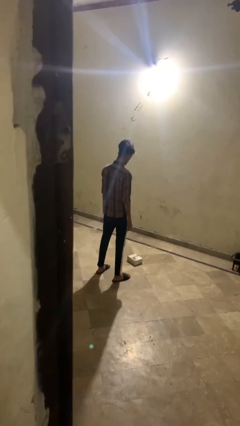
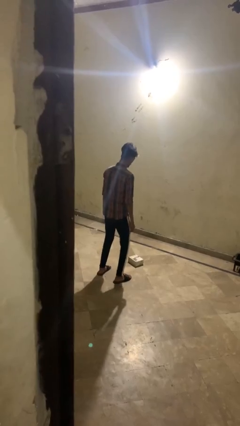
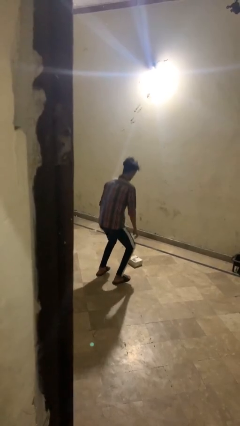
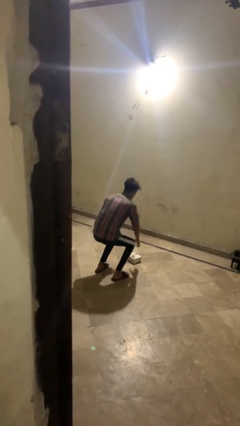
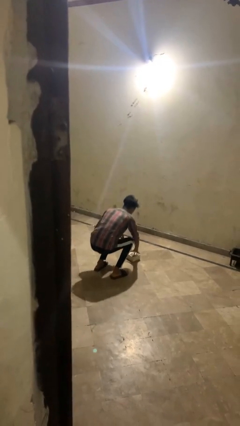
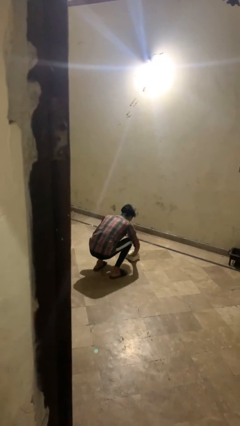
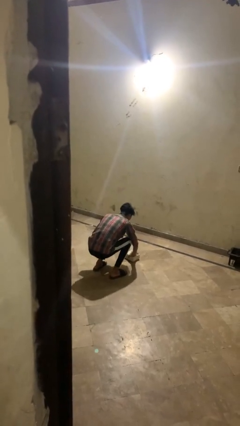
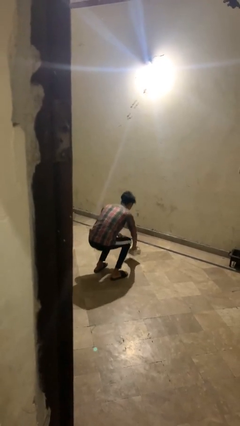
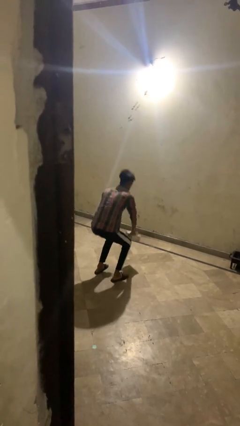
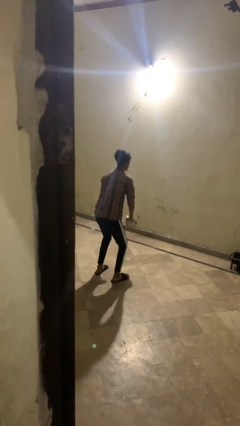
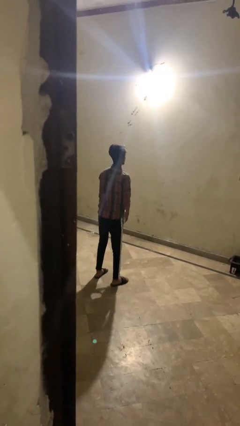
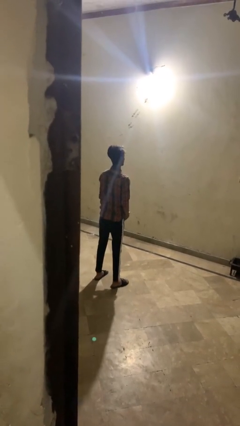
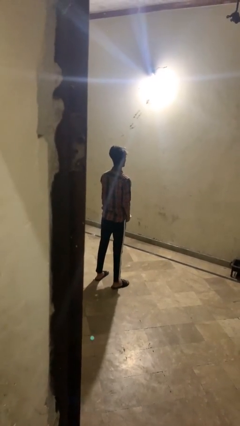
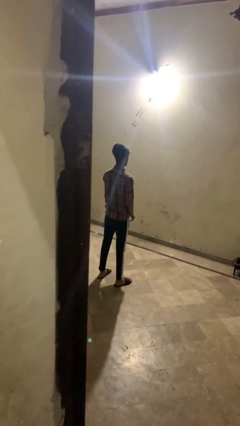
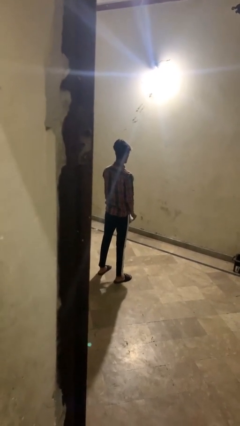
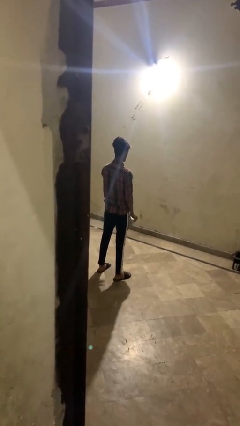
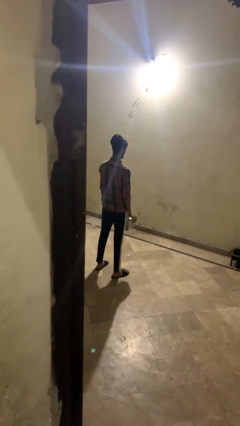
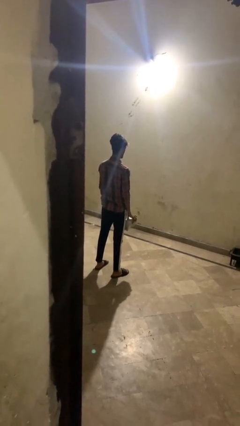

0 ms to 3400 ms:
person picks up object from floor

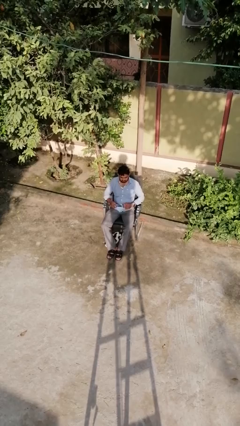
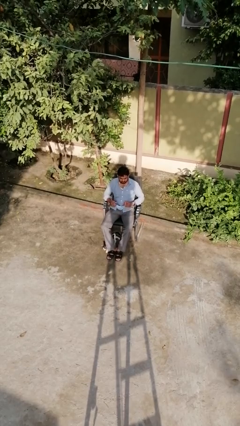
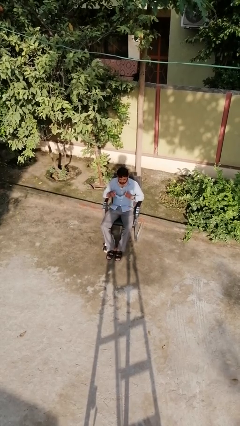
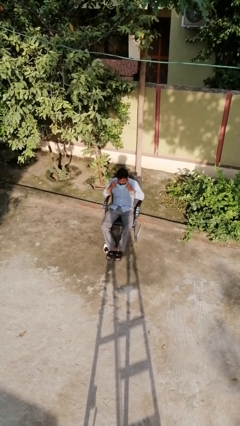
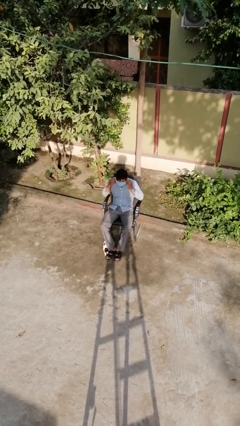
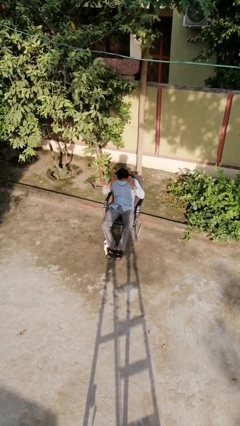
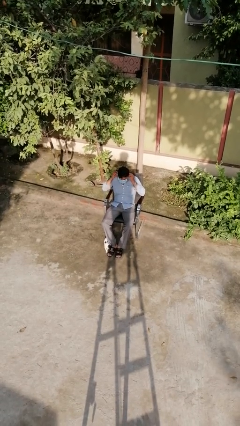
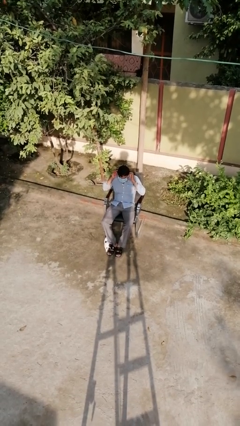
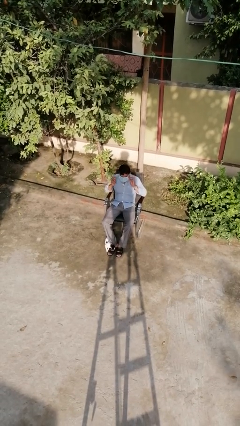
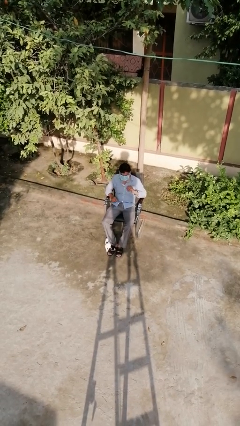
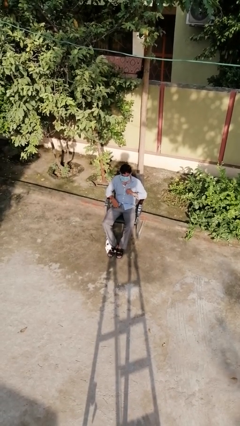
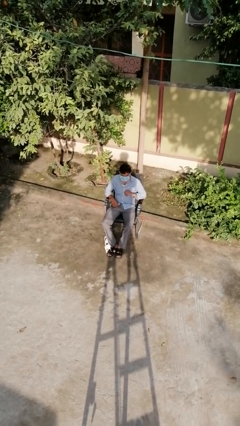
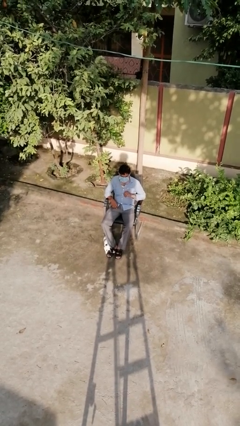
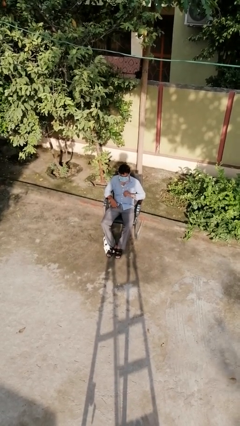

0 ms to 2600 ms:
person puts on facemask

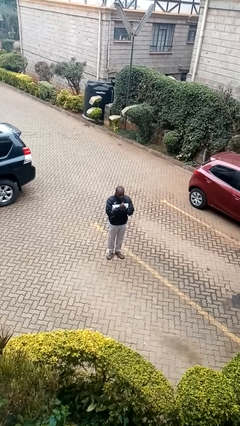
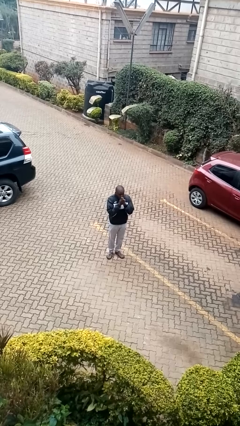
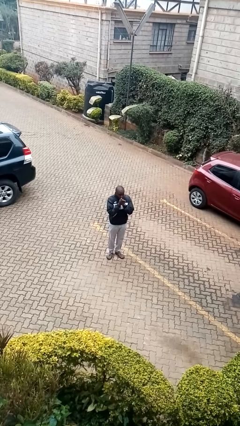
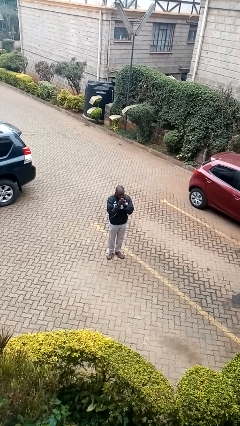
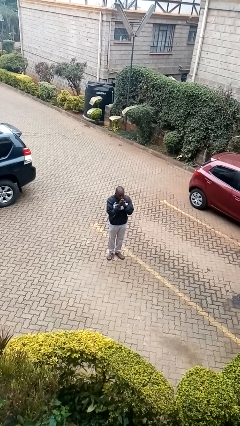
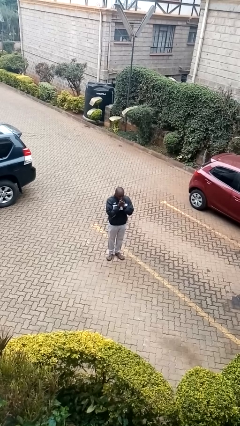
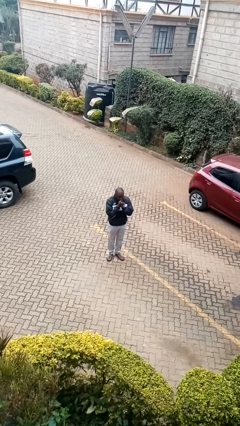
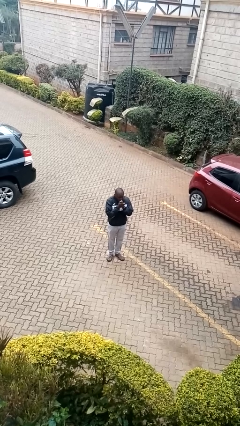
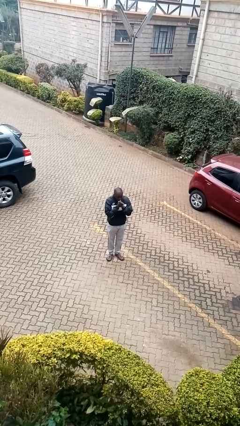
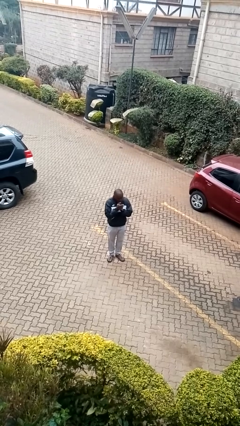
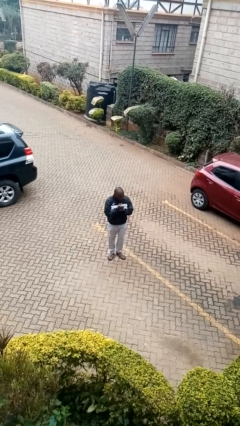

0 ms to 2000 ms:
person blows into hands

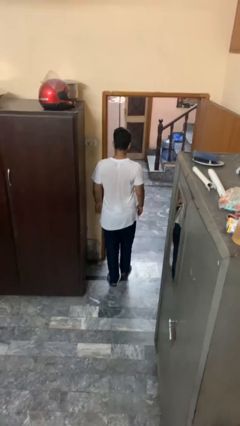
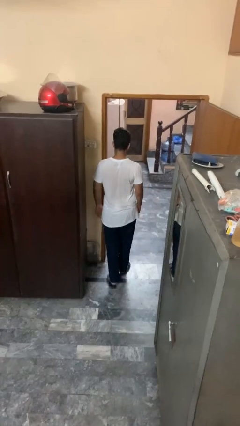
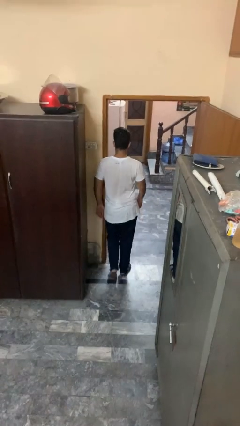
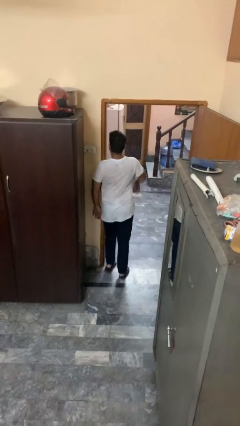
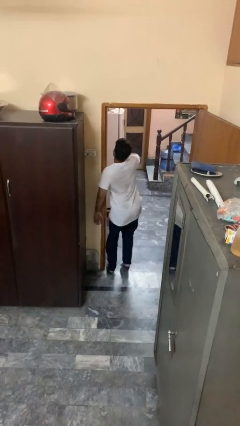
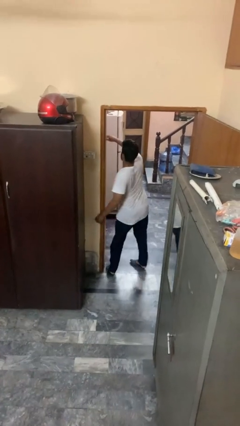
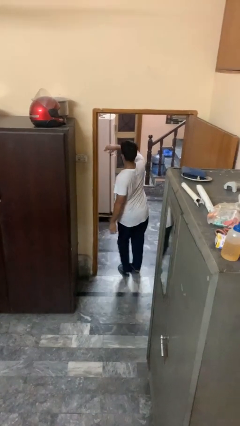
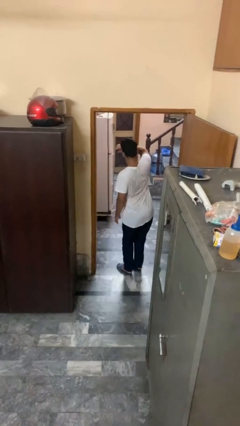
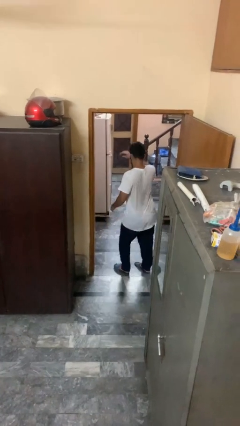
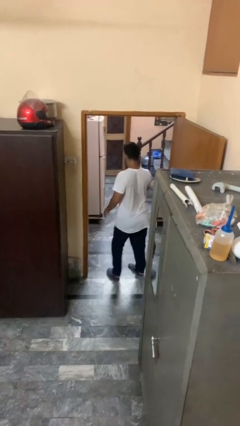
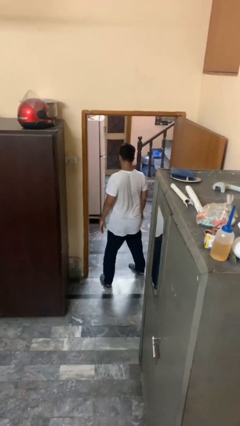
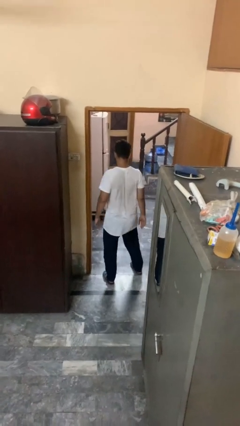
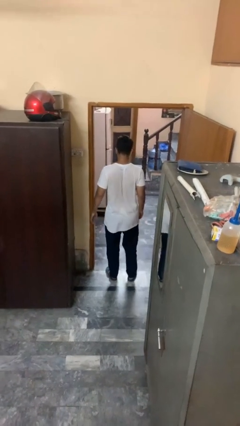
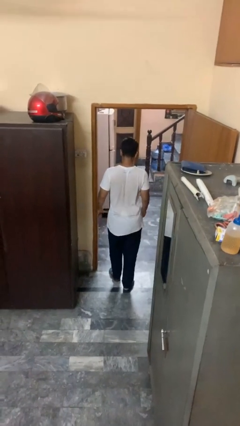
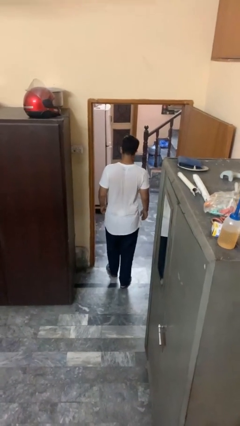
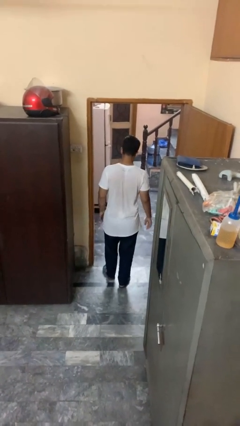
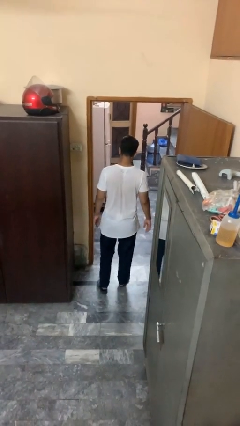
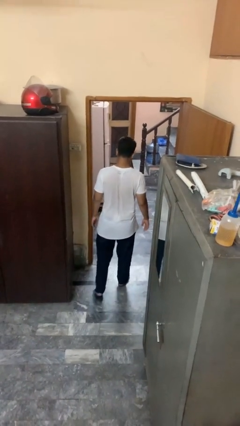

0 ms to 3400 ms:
person bumps into wall

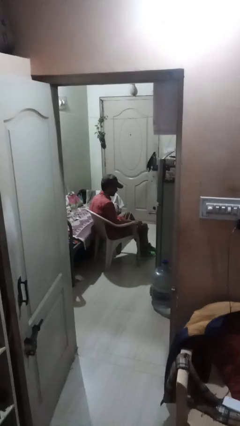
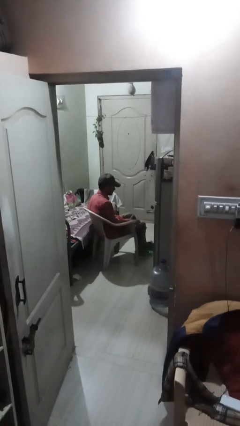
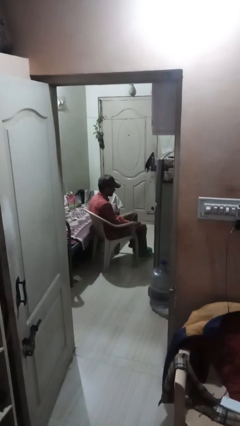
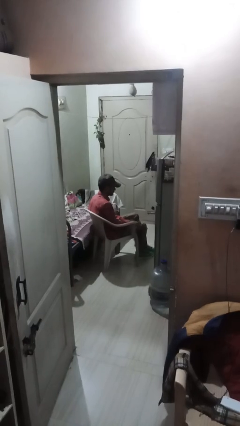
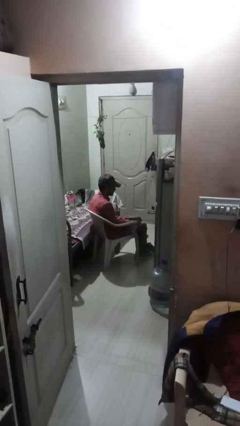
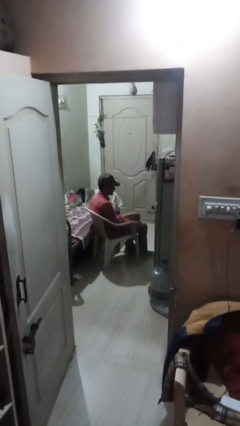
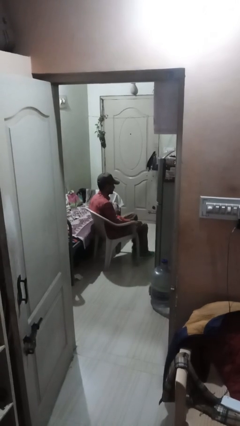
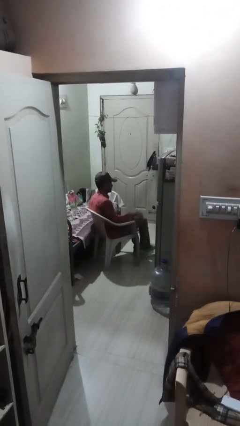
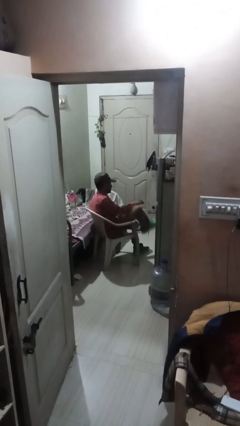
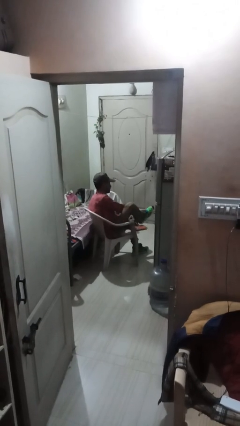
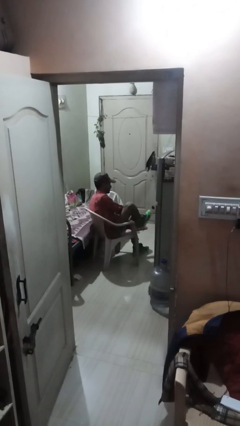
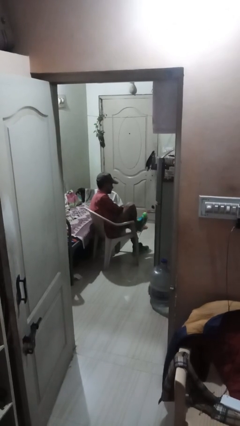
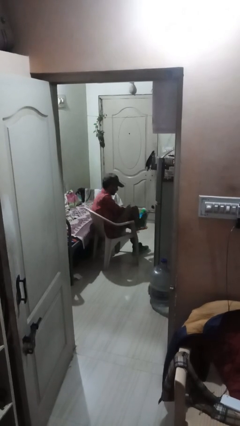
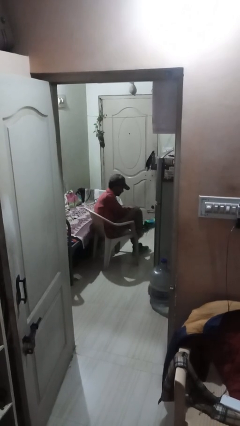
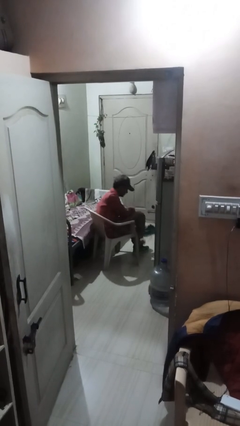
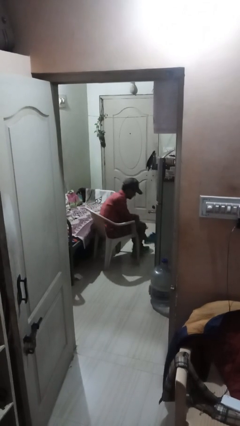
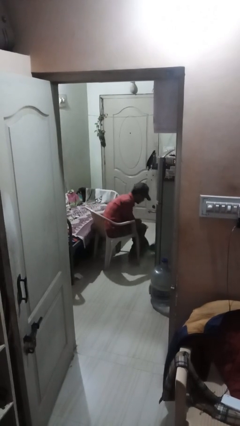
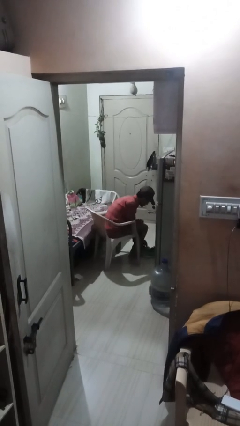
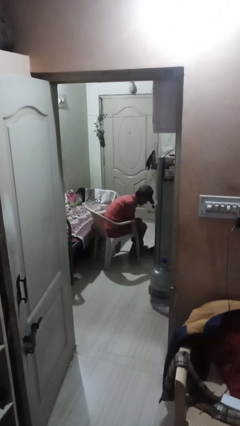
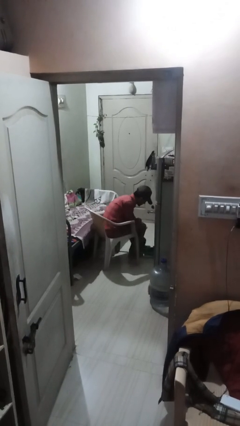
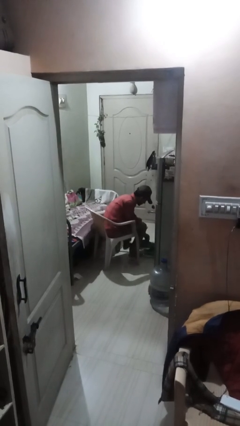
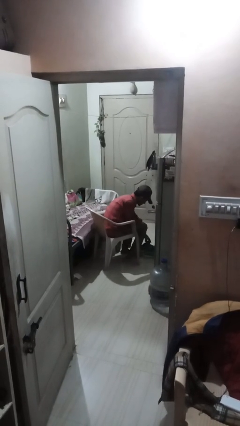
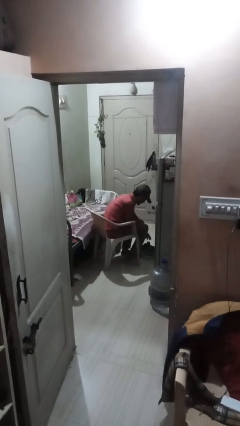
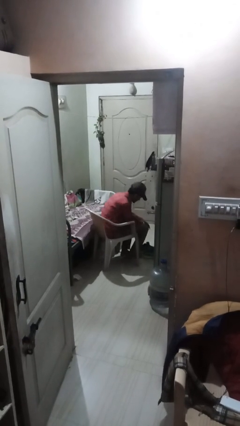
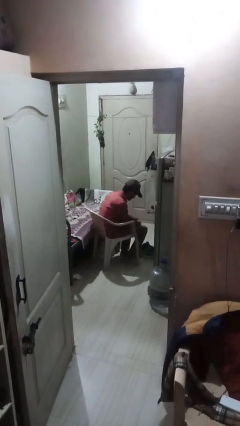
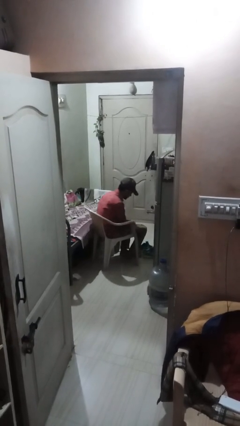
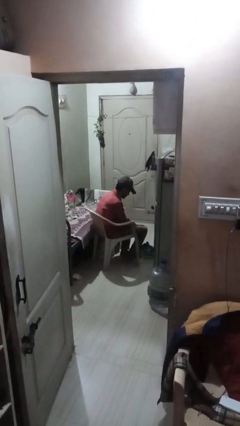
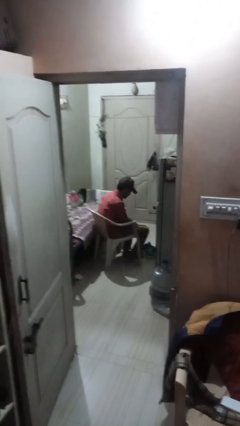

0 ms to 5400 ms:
person takes off shoes

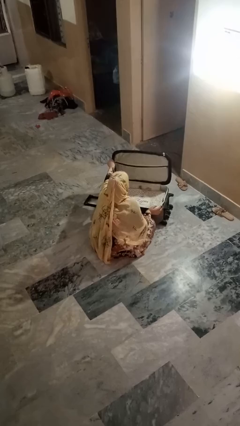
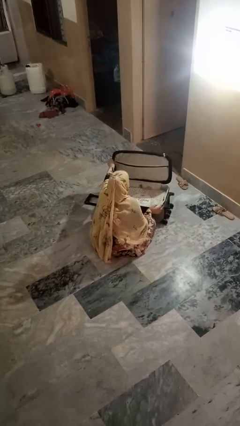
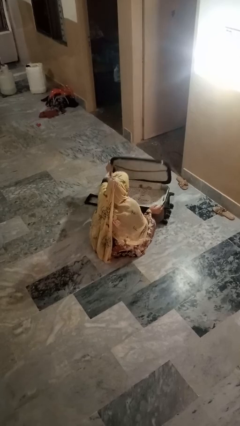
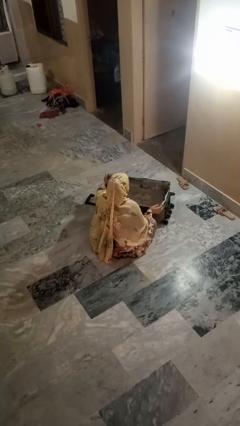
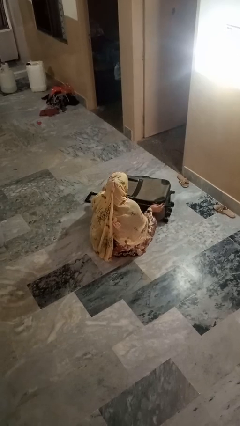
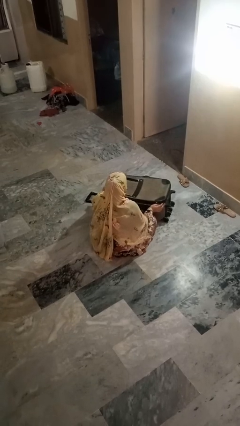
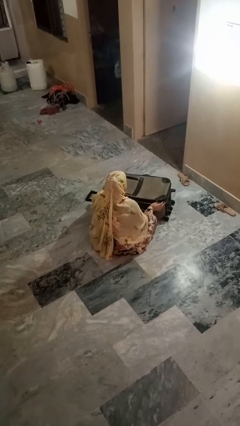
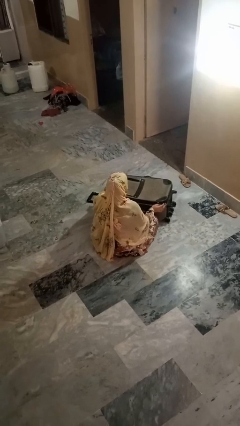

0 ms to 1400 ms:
person closes suitcase
